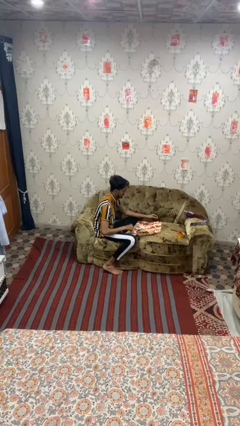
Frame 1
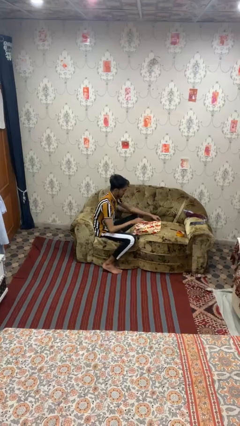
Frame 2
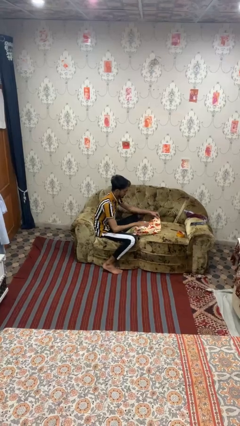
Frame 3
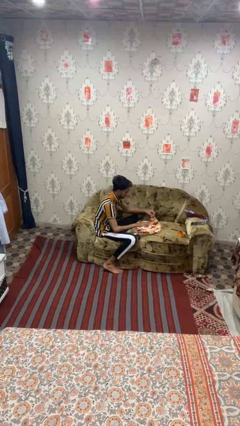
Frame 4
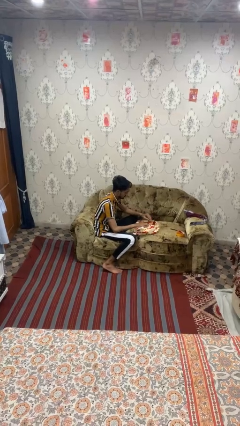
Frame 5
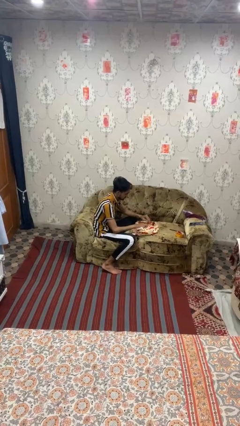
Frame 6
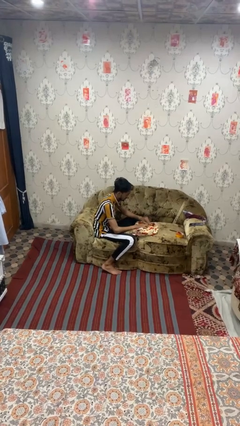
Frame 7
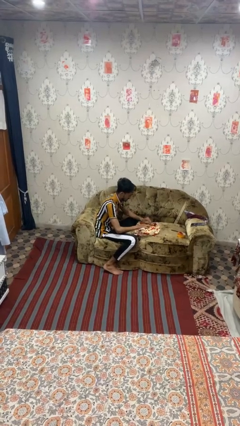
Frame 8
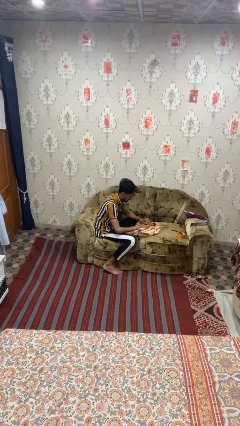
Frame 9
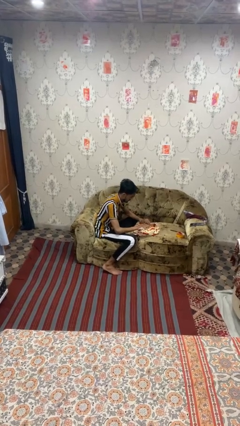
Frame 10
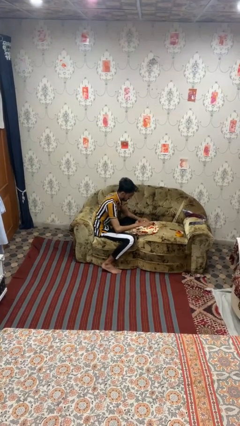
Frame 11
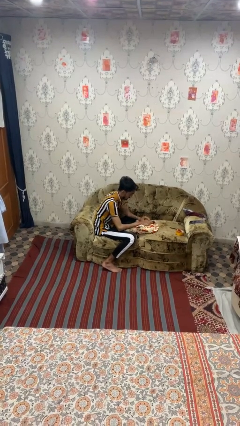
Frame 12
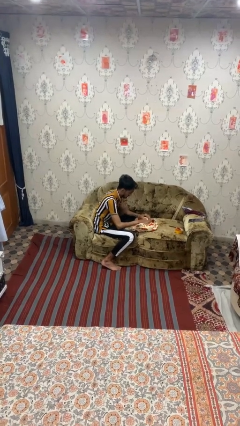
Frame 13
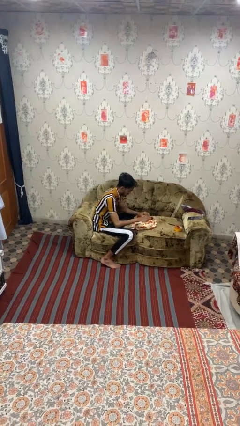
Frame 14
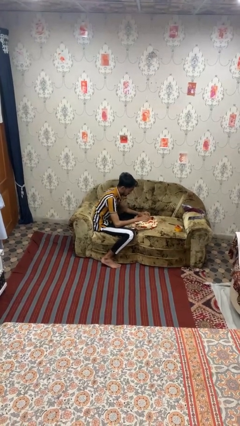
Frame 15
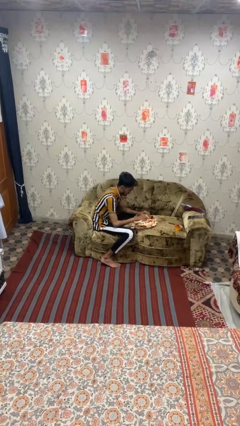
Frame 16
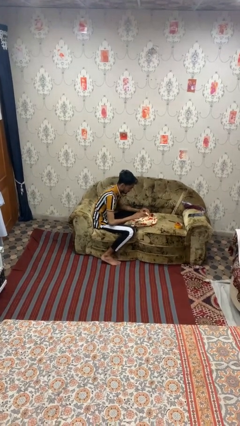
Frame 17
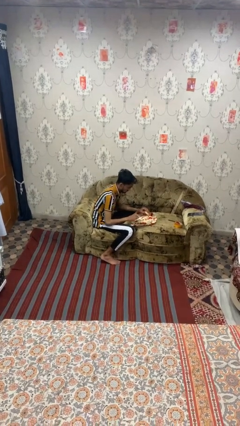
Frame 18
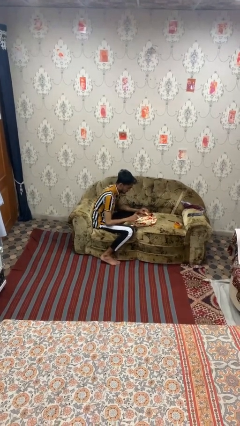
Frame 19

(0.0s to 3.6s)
person wraps box

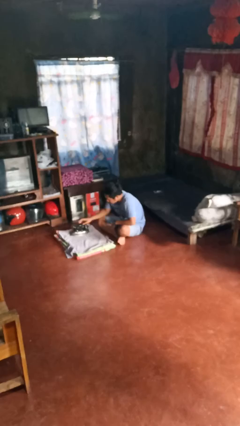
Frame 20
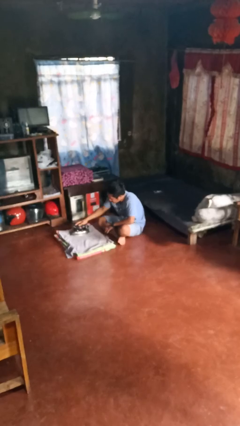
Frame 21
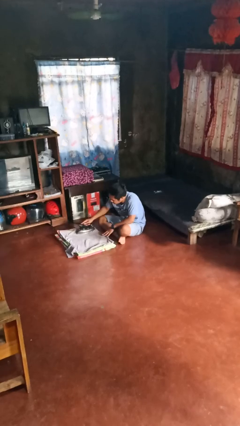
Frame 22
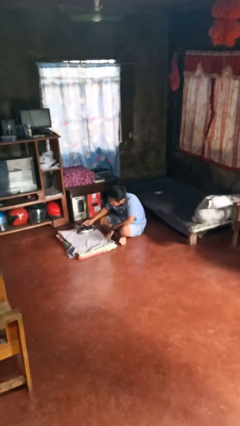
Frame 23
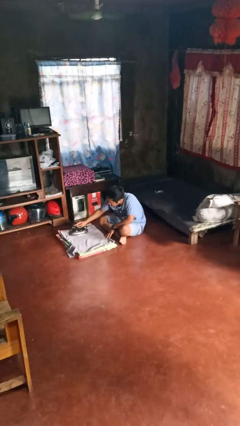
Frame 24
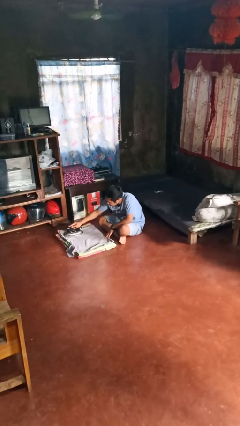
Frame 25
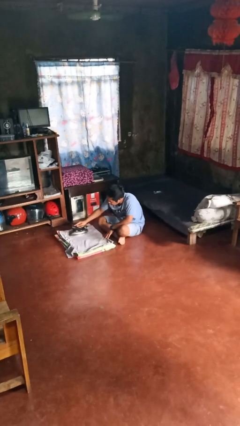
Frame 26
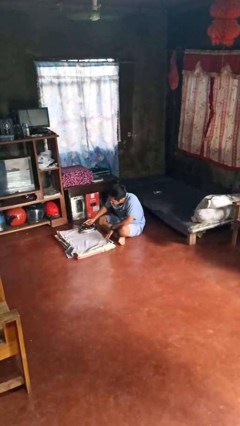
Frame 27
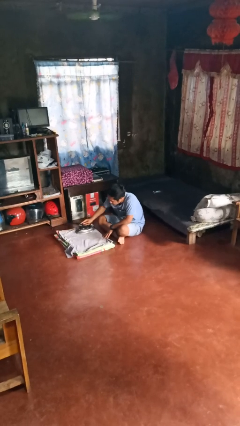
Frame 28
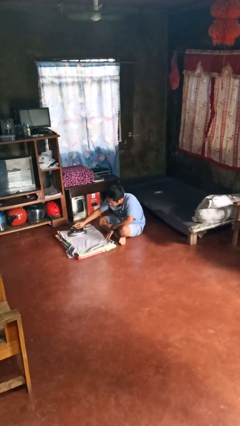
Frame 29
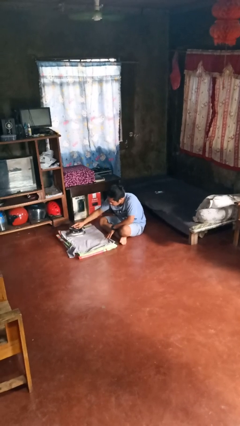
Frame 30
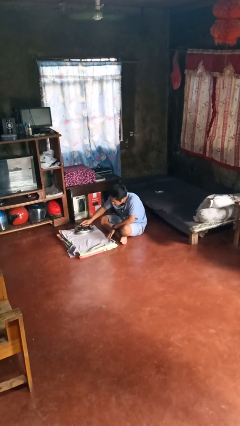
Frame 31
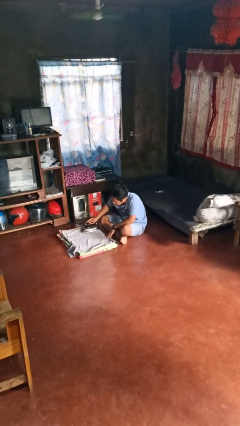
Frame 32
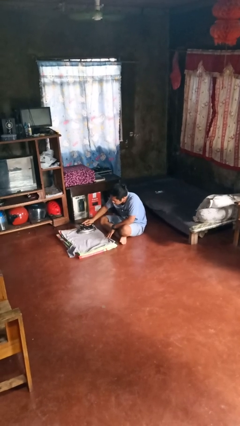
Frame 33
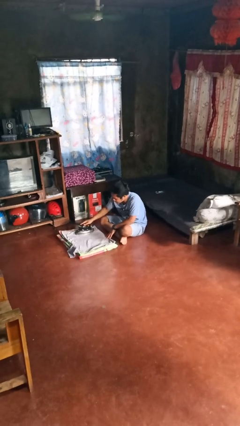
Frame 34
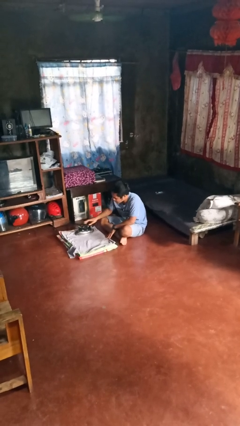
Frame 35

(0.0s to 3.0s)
person irons clothes

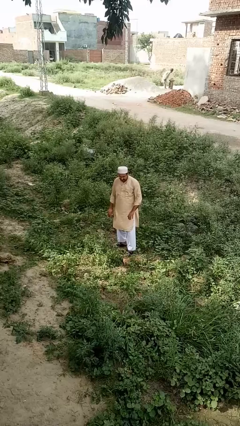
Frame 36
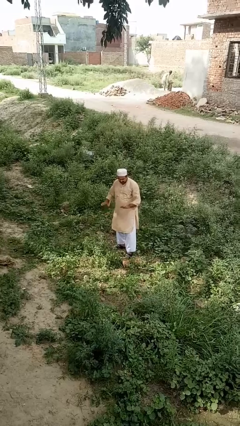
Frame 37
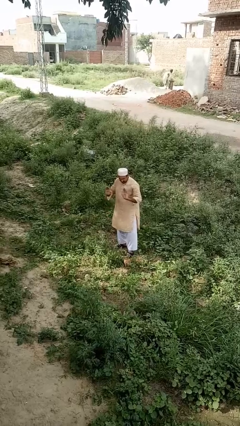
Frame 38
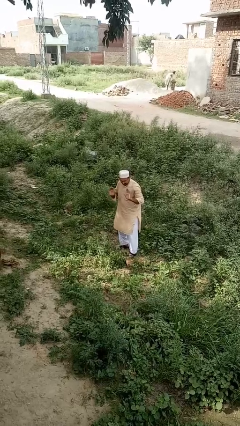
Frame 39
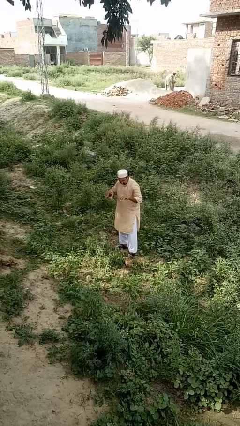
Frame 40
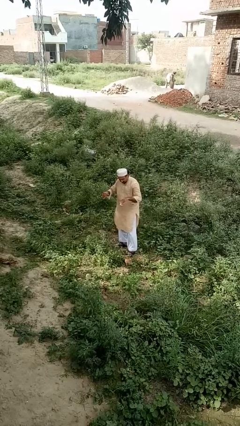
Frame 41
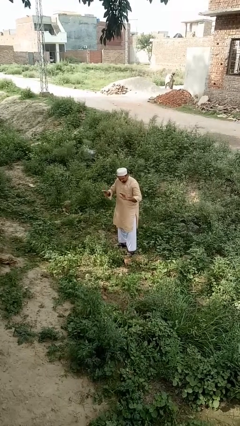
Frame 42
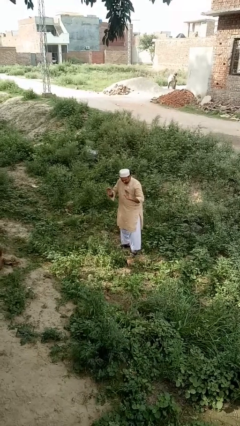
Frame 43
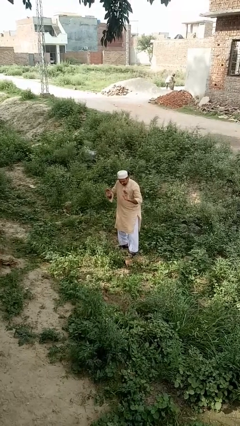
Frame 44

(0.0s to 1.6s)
person dances in place

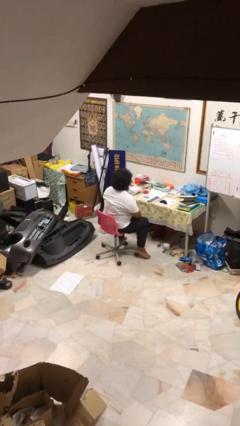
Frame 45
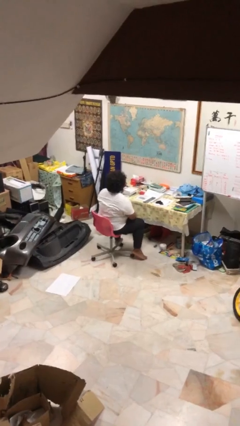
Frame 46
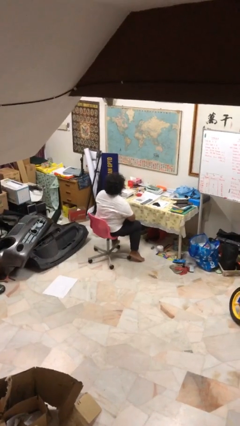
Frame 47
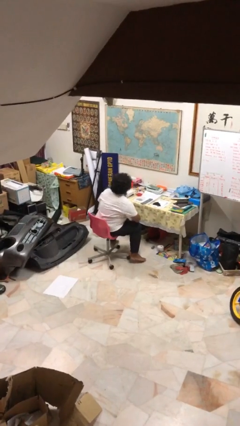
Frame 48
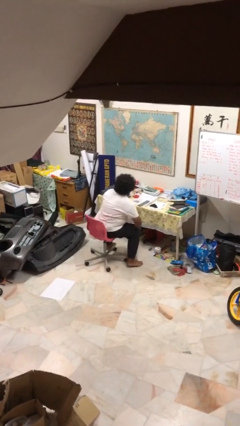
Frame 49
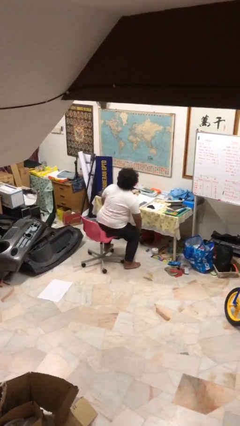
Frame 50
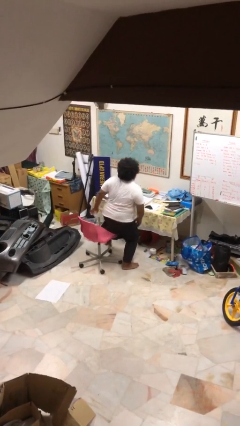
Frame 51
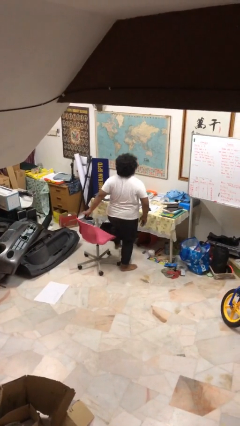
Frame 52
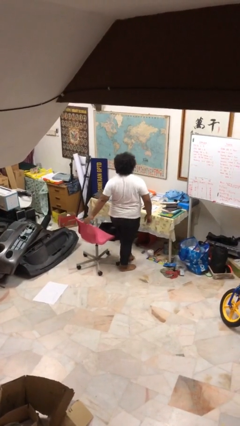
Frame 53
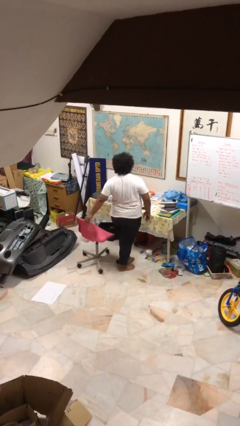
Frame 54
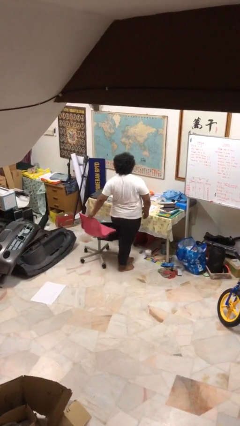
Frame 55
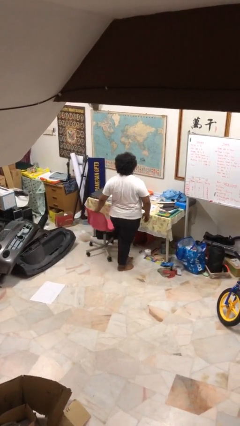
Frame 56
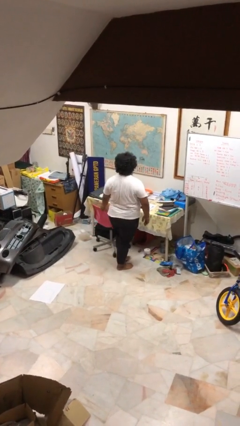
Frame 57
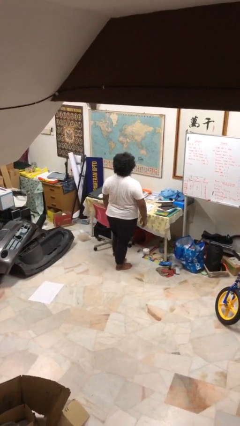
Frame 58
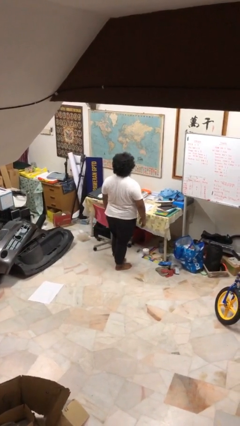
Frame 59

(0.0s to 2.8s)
person stands up

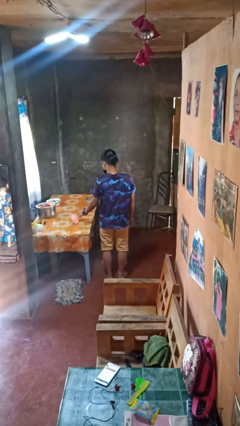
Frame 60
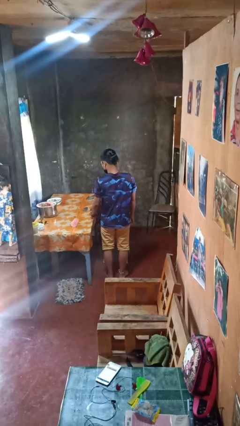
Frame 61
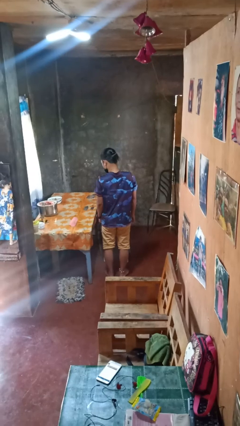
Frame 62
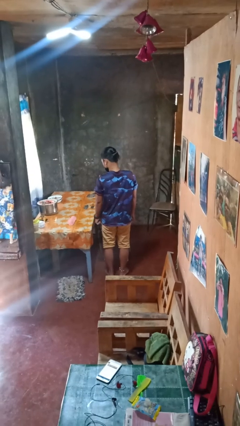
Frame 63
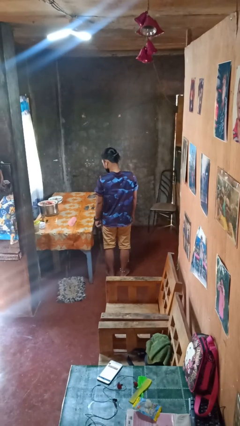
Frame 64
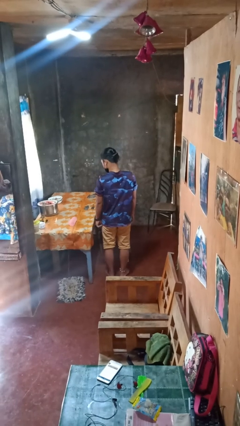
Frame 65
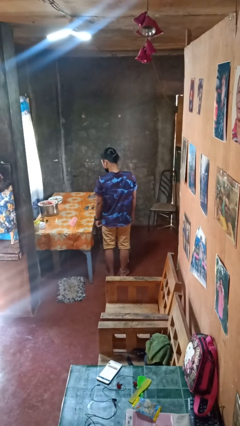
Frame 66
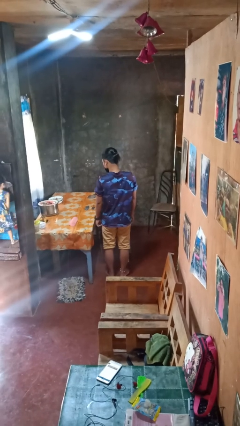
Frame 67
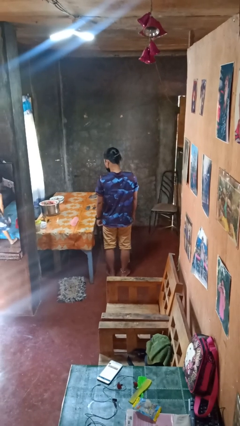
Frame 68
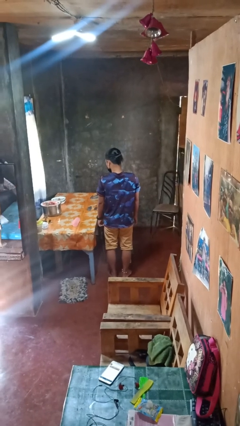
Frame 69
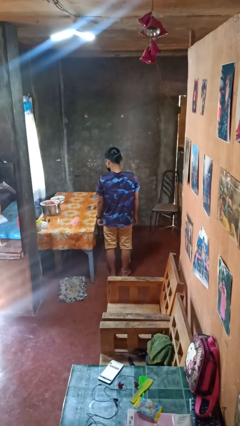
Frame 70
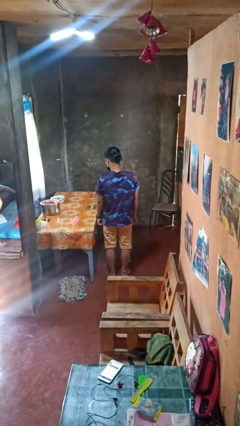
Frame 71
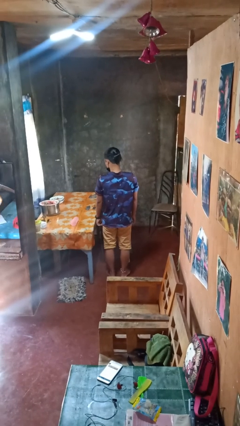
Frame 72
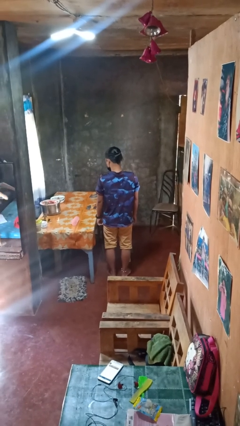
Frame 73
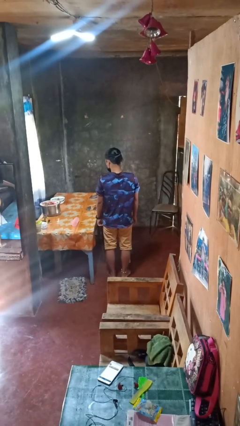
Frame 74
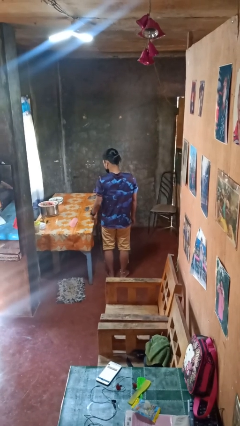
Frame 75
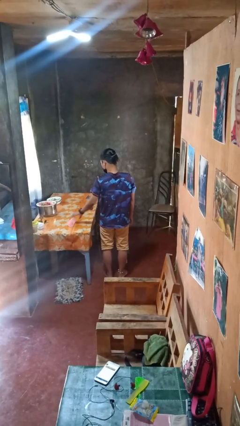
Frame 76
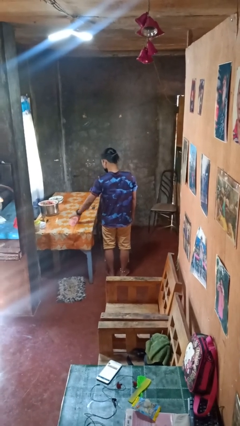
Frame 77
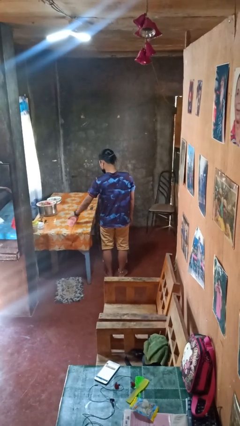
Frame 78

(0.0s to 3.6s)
person spills on table

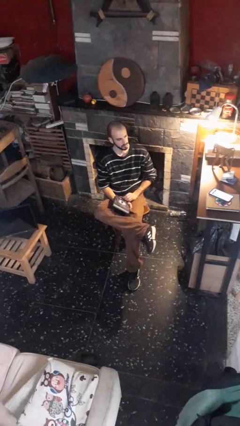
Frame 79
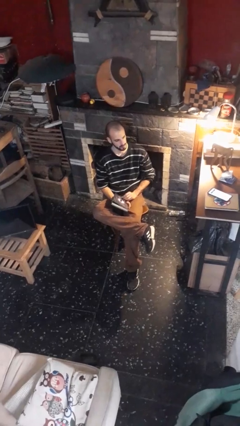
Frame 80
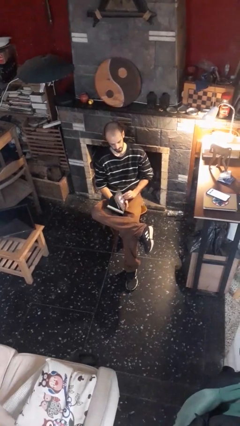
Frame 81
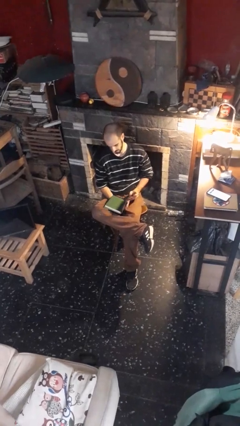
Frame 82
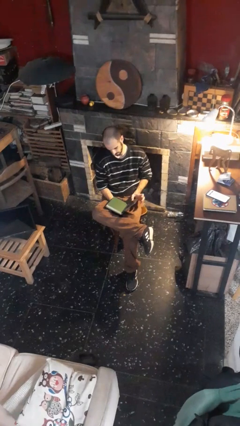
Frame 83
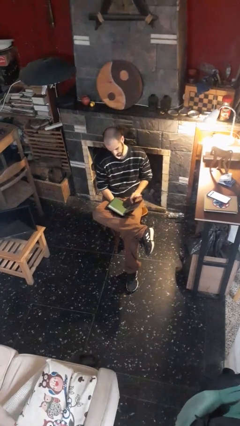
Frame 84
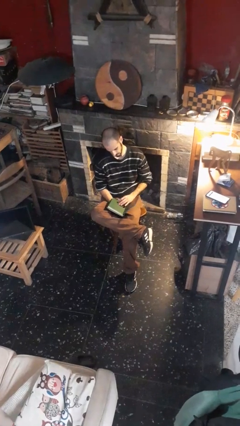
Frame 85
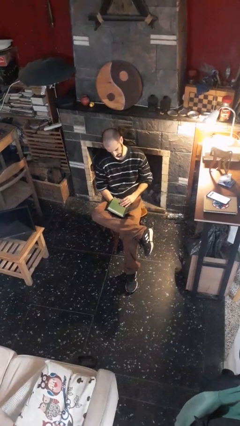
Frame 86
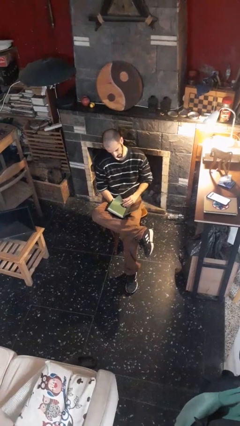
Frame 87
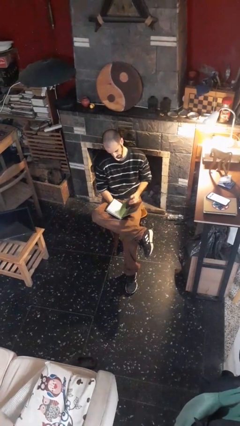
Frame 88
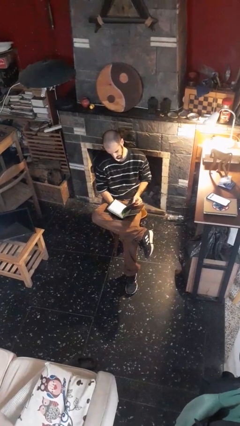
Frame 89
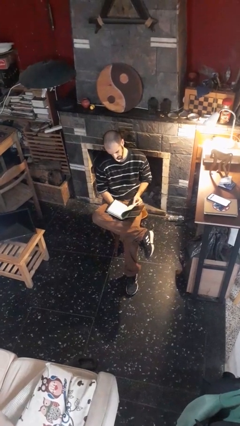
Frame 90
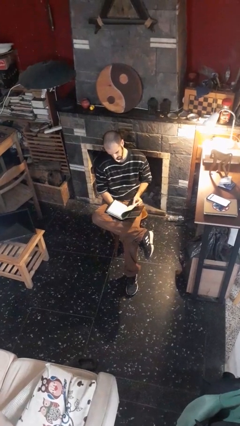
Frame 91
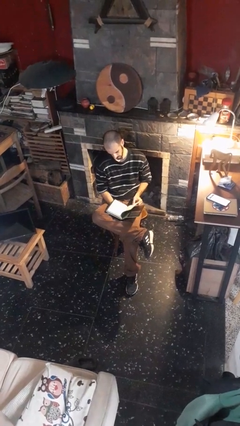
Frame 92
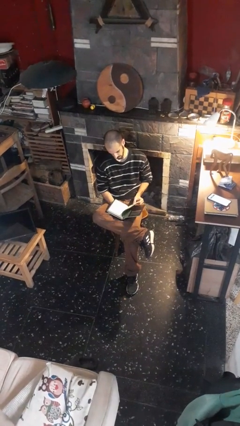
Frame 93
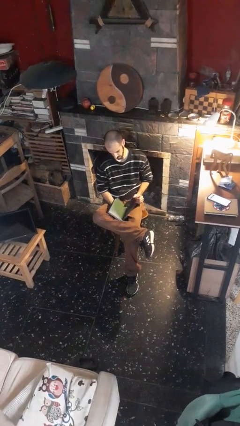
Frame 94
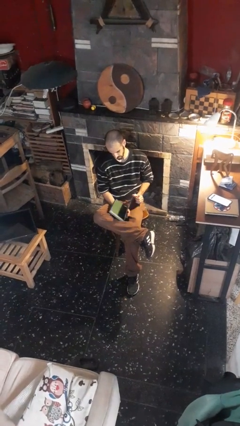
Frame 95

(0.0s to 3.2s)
person reads book
